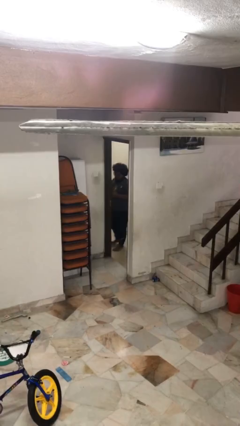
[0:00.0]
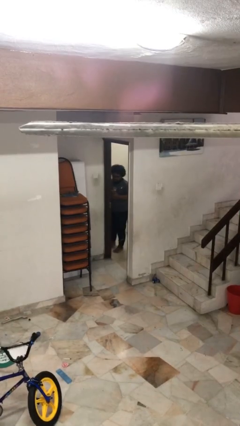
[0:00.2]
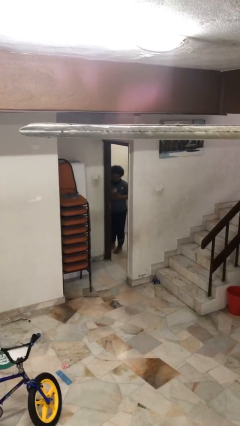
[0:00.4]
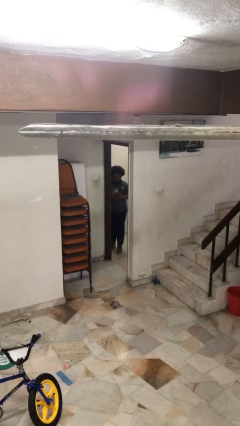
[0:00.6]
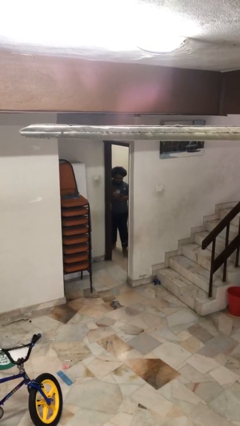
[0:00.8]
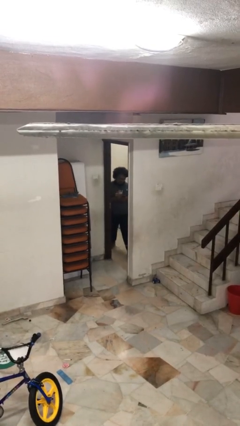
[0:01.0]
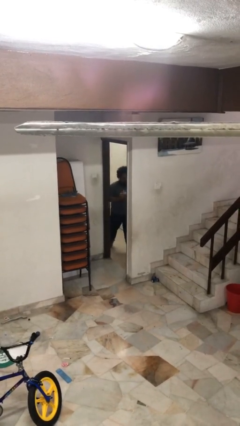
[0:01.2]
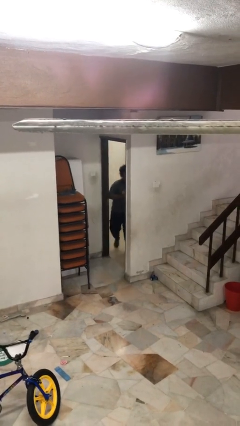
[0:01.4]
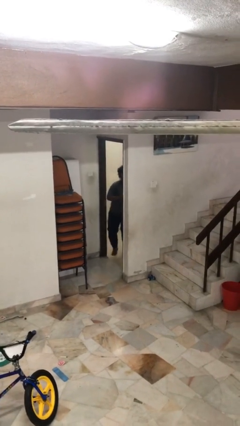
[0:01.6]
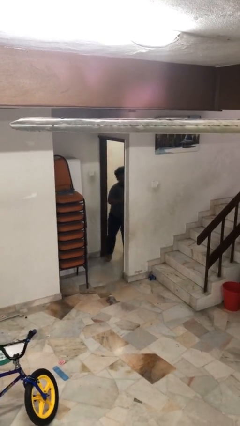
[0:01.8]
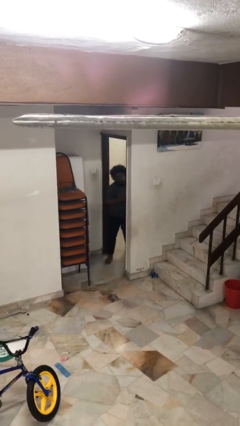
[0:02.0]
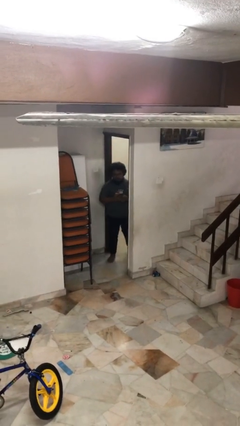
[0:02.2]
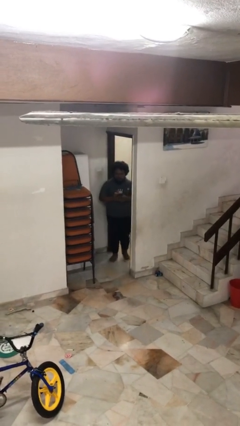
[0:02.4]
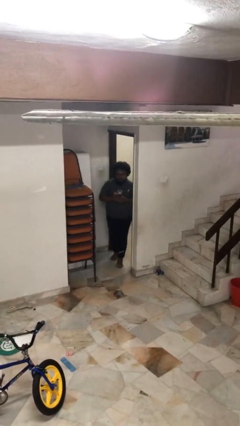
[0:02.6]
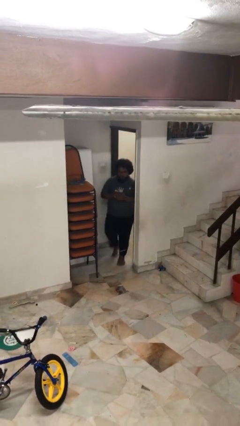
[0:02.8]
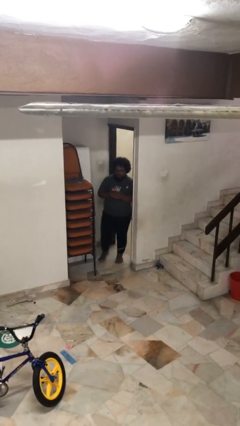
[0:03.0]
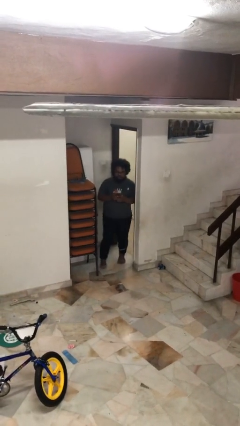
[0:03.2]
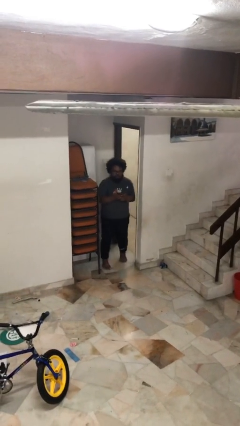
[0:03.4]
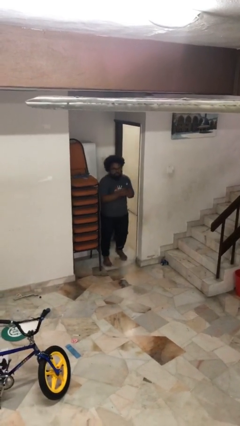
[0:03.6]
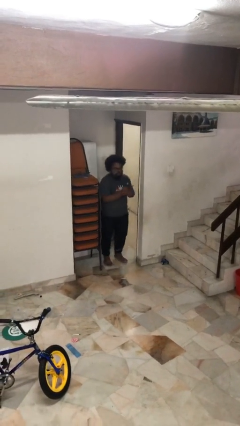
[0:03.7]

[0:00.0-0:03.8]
person enters scene through structure

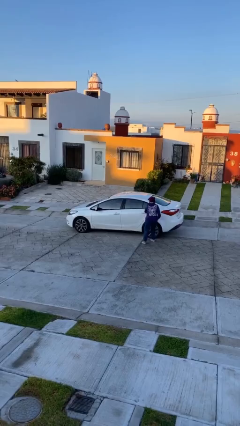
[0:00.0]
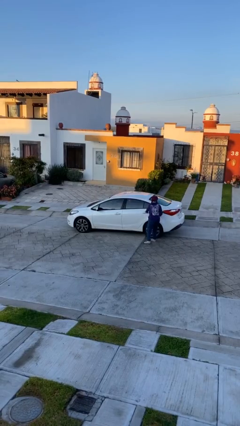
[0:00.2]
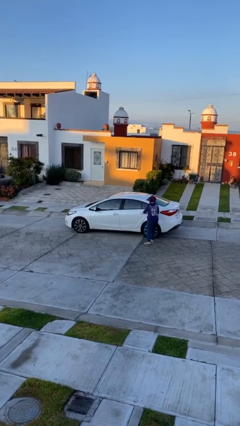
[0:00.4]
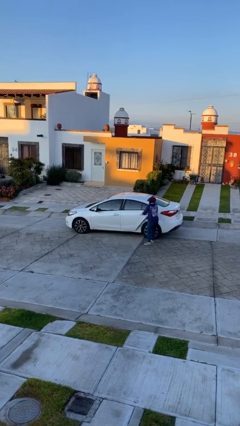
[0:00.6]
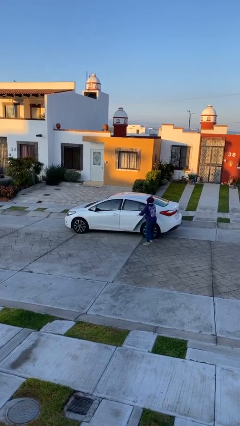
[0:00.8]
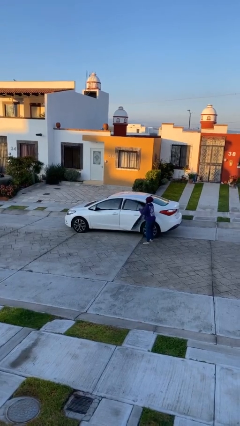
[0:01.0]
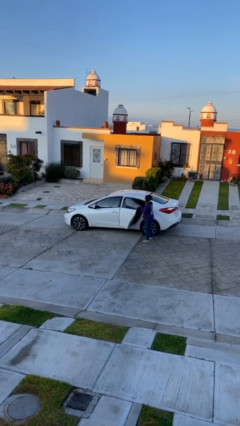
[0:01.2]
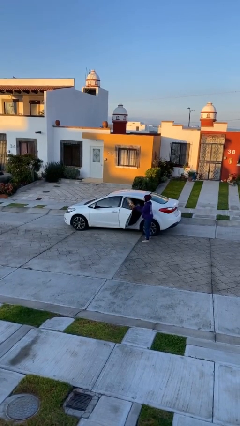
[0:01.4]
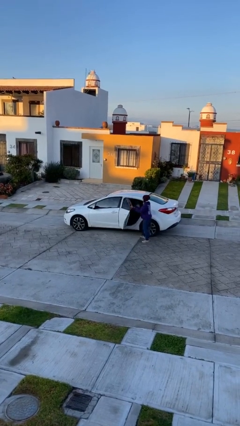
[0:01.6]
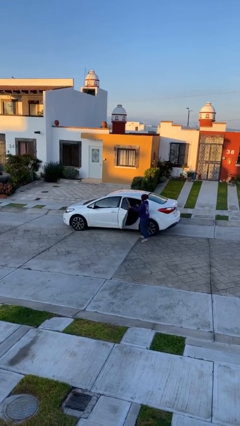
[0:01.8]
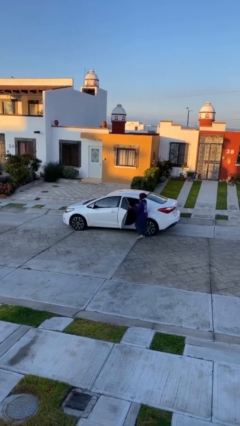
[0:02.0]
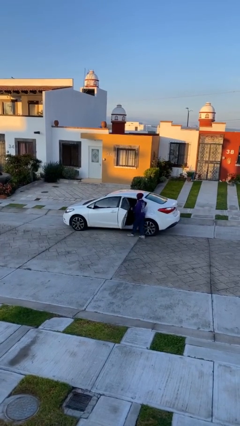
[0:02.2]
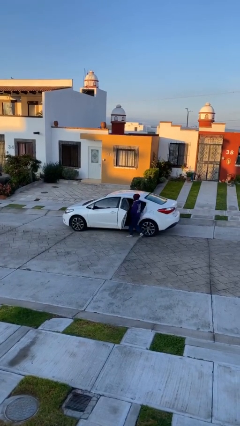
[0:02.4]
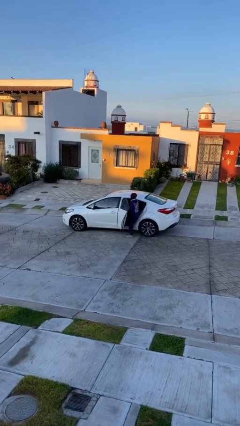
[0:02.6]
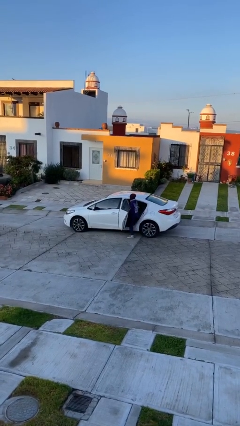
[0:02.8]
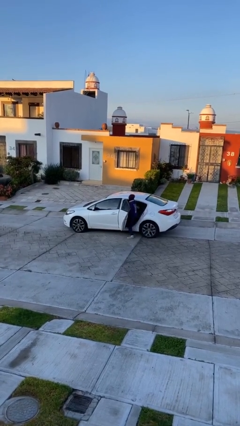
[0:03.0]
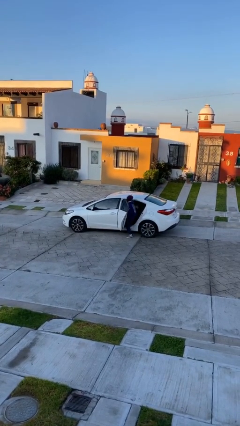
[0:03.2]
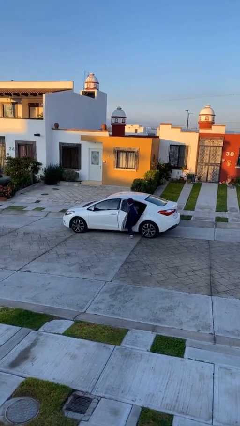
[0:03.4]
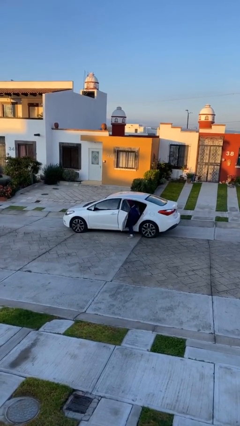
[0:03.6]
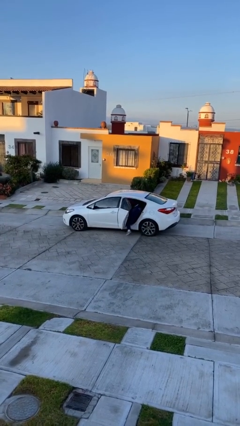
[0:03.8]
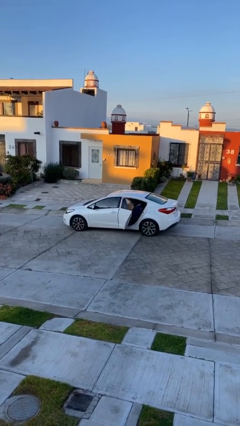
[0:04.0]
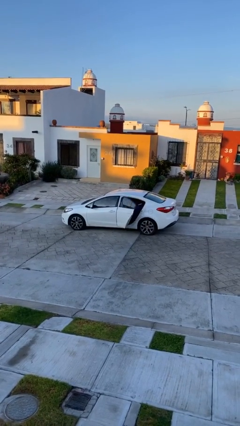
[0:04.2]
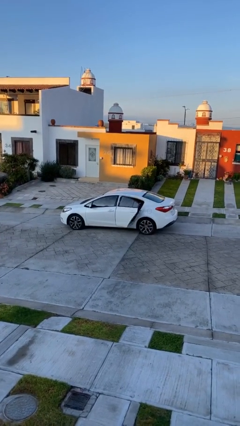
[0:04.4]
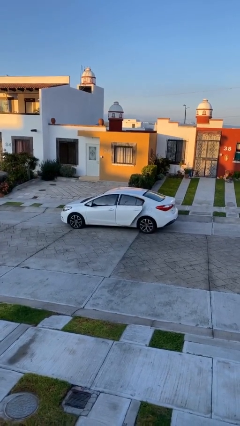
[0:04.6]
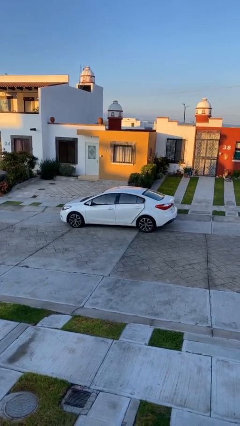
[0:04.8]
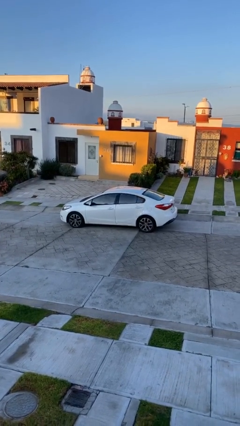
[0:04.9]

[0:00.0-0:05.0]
car picks up person

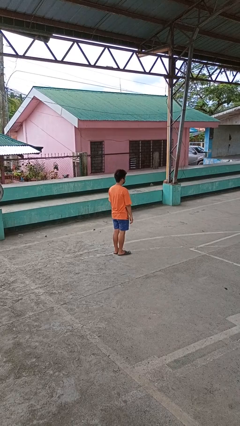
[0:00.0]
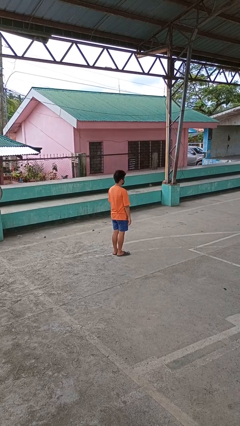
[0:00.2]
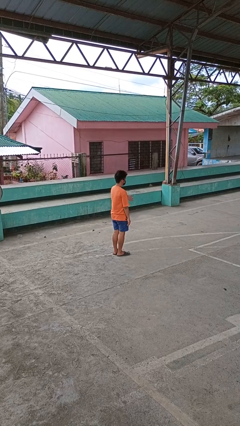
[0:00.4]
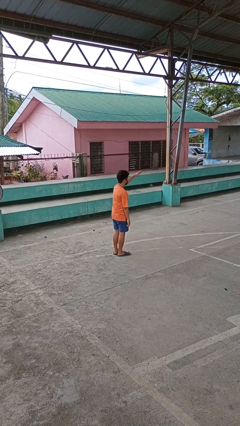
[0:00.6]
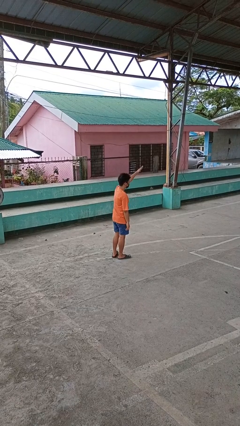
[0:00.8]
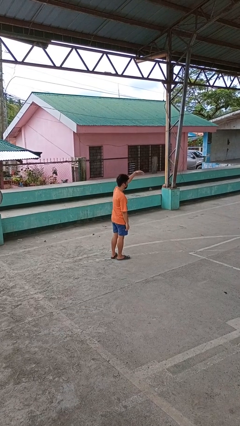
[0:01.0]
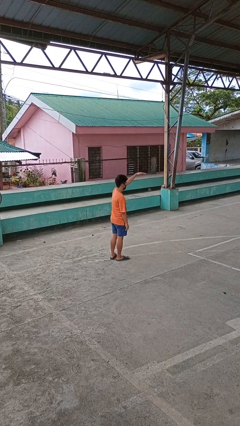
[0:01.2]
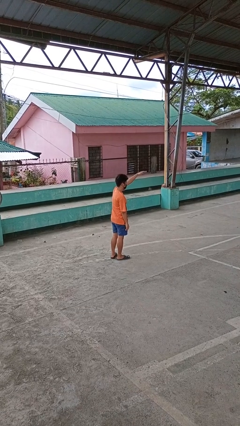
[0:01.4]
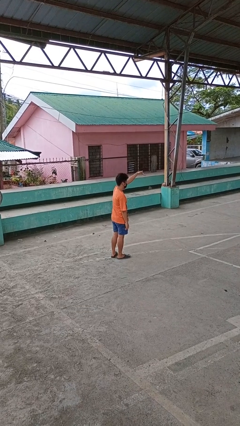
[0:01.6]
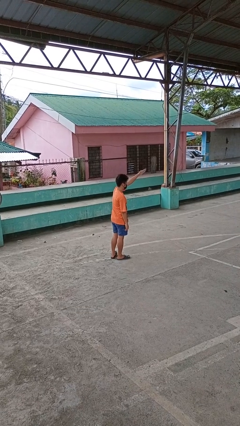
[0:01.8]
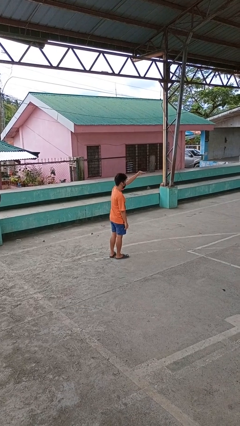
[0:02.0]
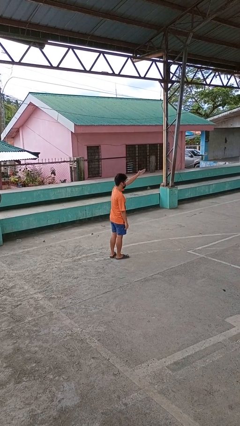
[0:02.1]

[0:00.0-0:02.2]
person gestures come here

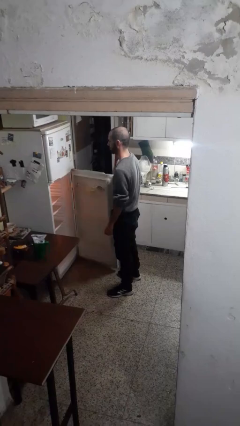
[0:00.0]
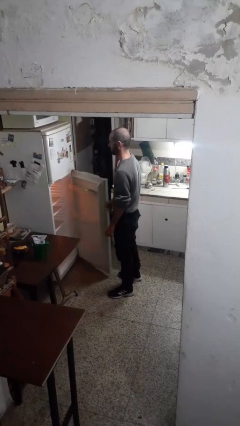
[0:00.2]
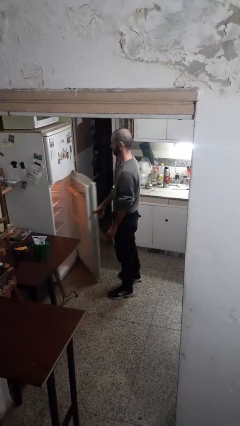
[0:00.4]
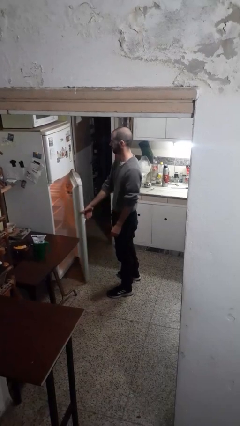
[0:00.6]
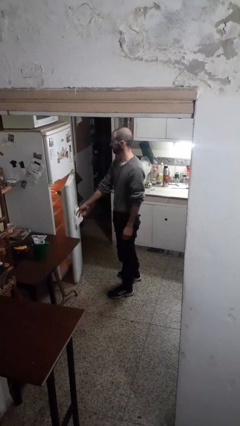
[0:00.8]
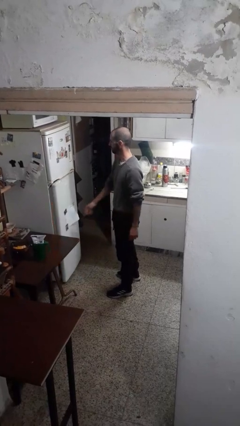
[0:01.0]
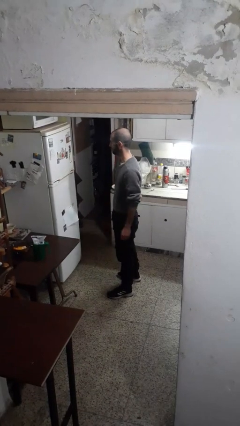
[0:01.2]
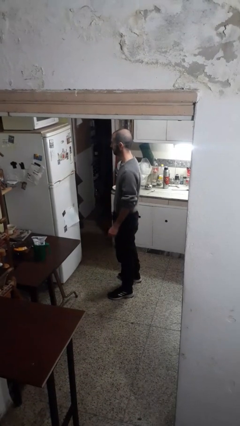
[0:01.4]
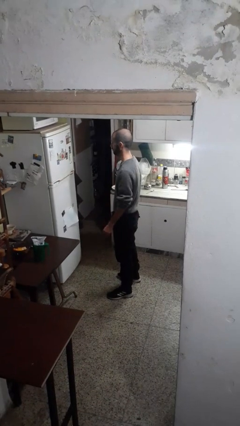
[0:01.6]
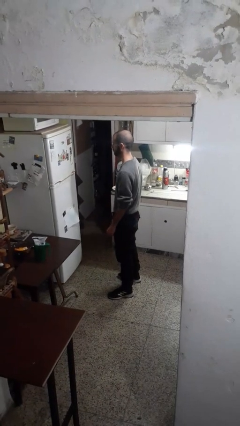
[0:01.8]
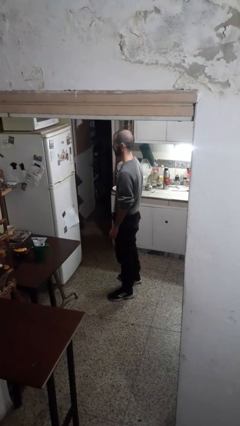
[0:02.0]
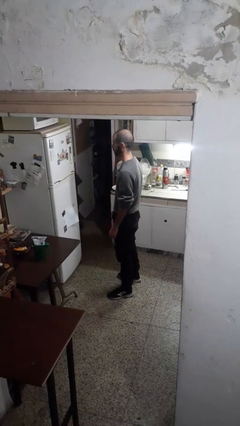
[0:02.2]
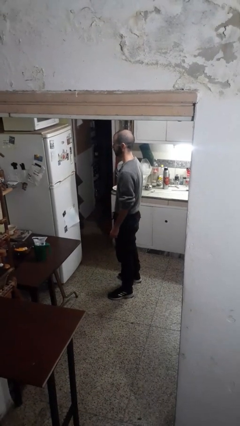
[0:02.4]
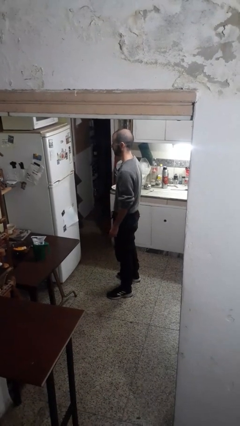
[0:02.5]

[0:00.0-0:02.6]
person closes refrigerator

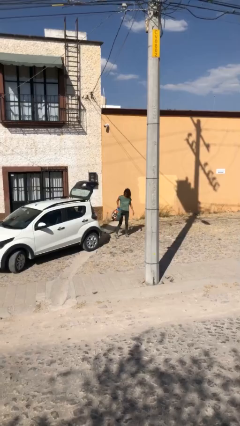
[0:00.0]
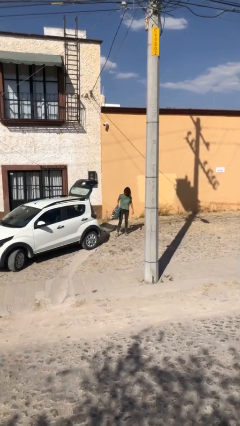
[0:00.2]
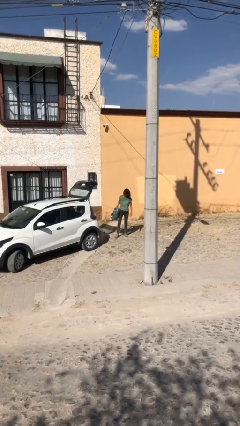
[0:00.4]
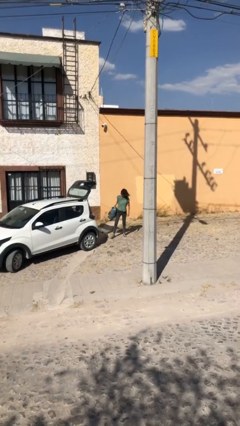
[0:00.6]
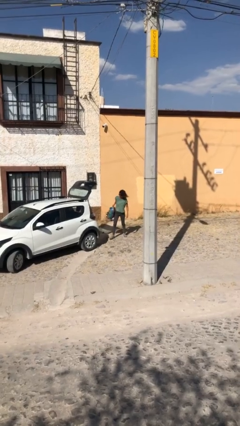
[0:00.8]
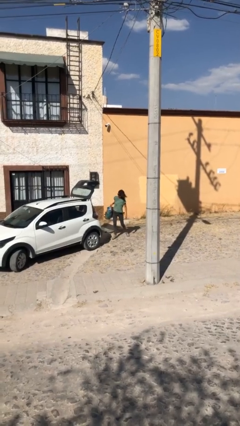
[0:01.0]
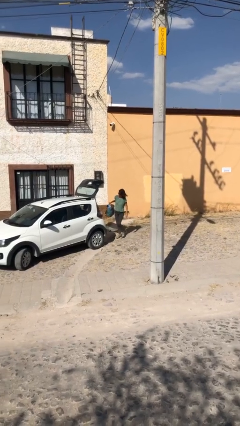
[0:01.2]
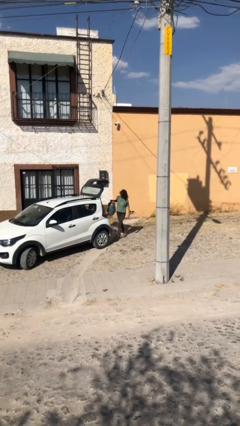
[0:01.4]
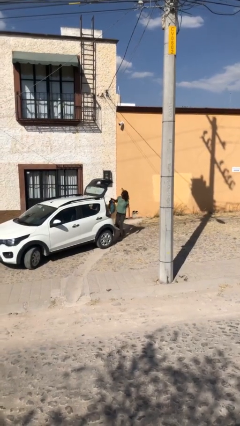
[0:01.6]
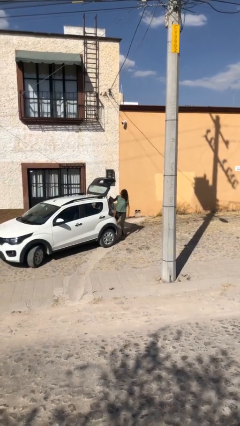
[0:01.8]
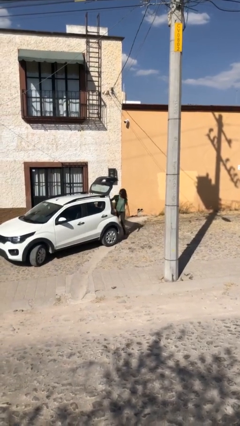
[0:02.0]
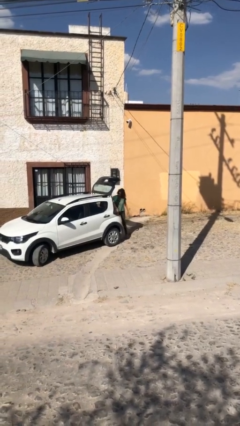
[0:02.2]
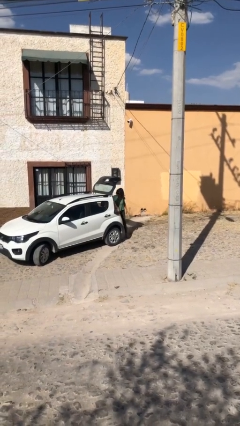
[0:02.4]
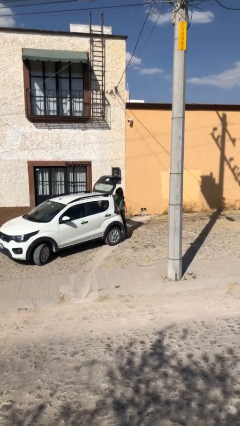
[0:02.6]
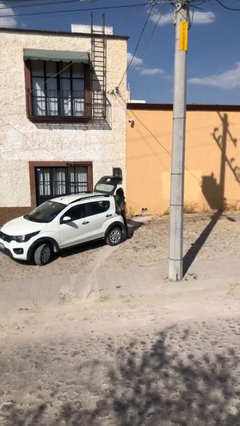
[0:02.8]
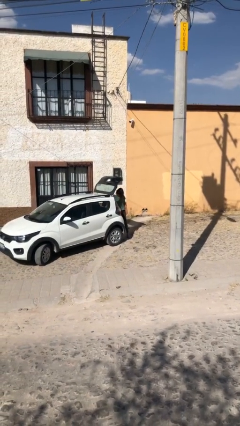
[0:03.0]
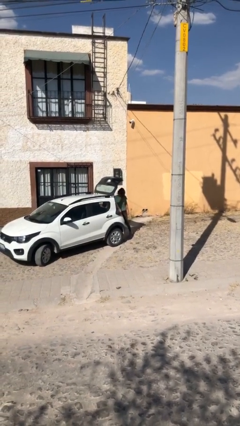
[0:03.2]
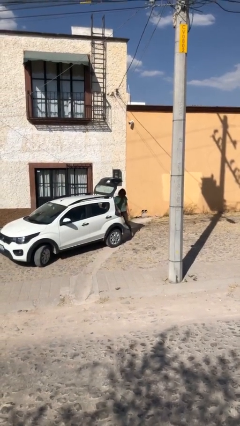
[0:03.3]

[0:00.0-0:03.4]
person loads car

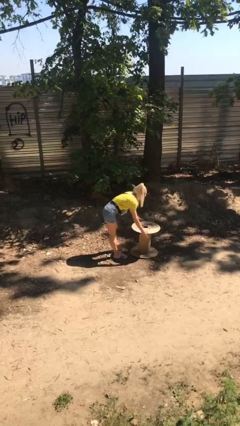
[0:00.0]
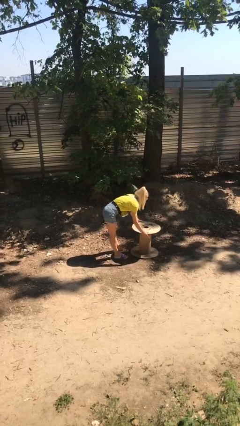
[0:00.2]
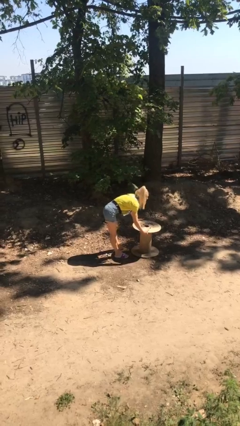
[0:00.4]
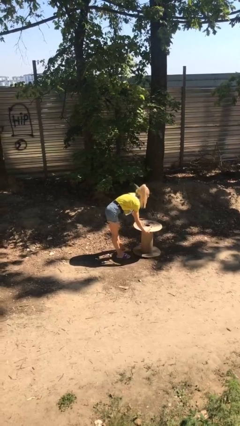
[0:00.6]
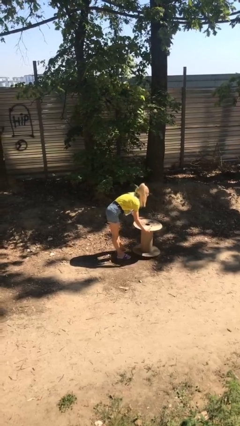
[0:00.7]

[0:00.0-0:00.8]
person picks up object from floor
